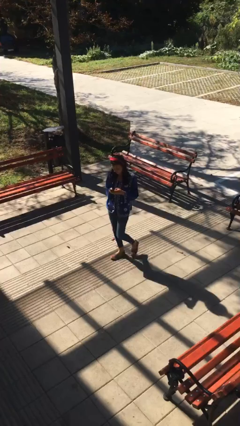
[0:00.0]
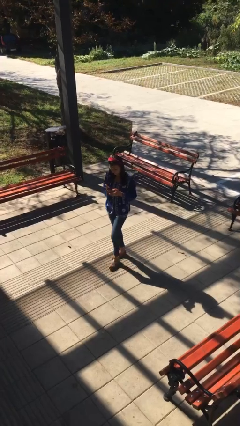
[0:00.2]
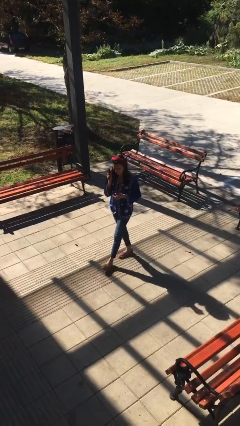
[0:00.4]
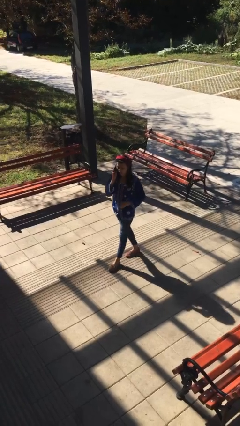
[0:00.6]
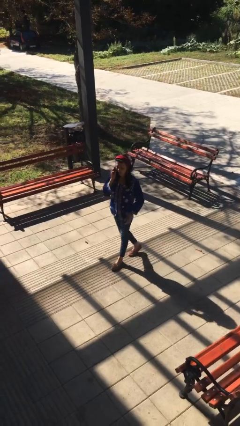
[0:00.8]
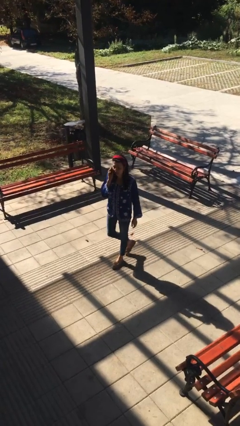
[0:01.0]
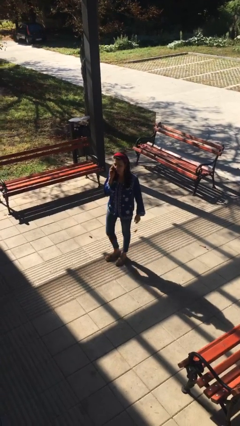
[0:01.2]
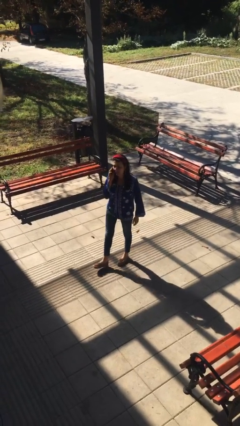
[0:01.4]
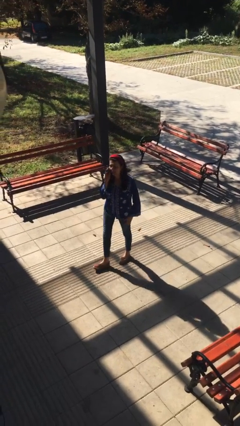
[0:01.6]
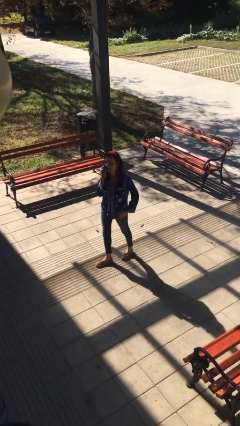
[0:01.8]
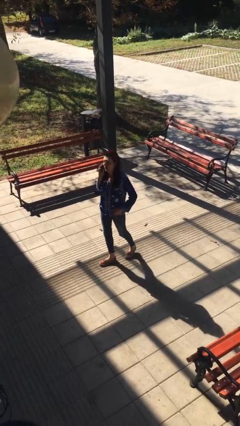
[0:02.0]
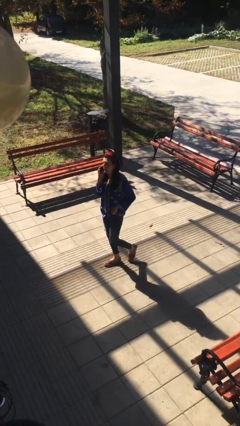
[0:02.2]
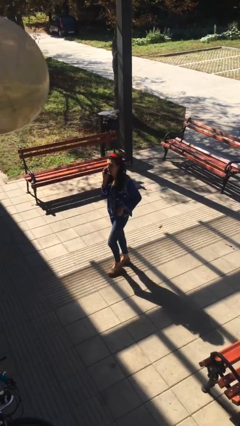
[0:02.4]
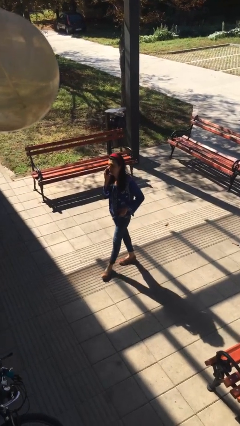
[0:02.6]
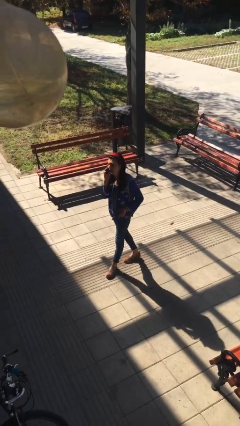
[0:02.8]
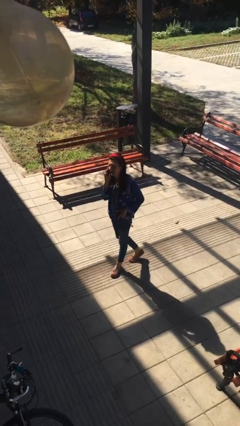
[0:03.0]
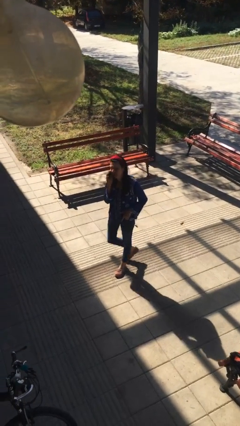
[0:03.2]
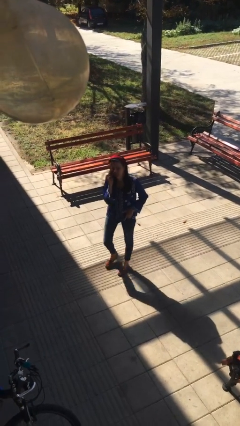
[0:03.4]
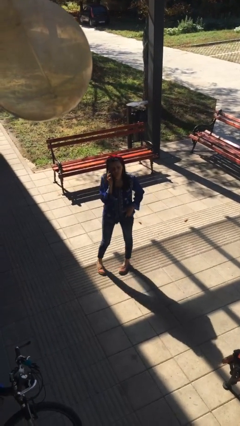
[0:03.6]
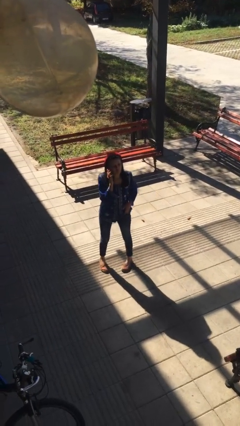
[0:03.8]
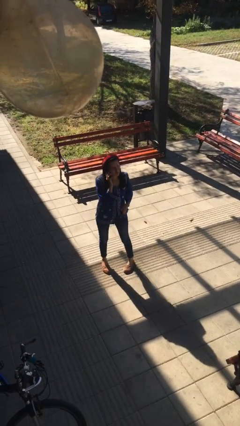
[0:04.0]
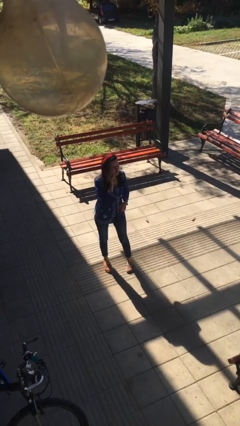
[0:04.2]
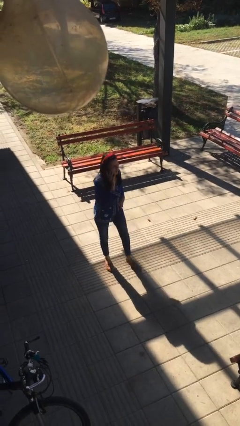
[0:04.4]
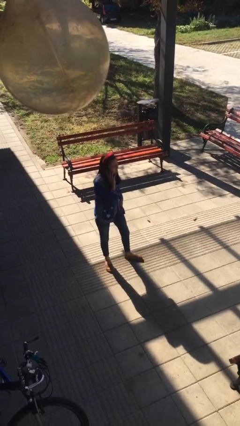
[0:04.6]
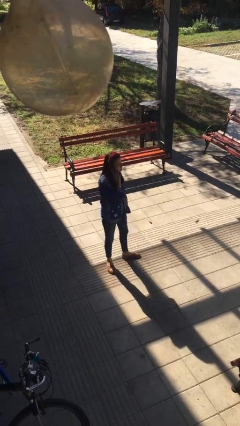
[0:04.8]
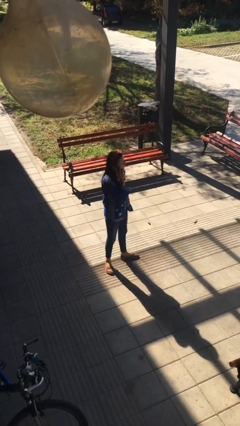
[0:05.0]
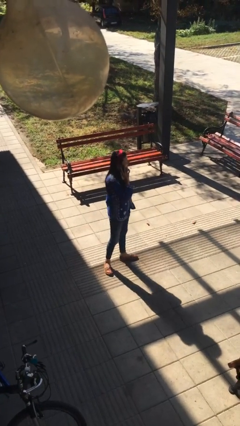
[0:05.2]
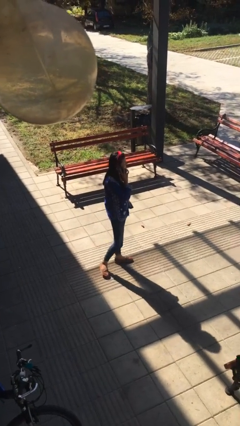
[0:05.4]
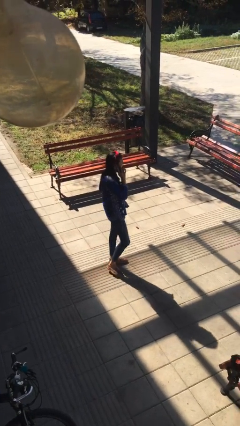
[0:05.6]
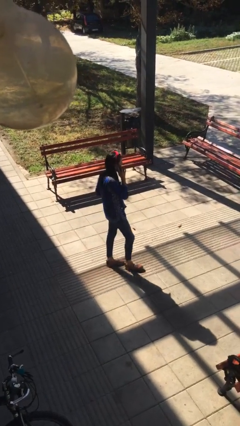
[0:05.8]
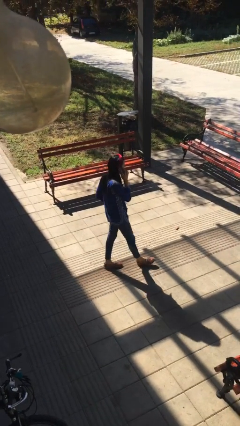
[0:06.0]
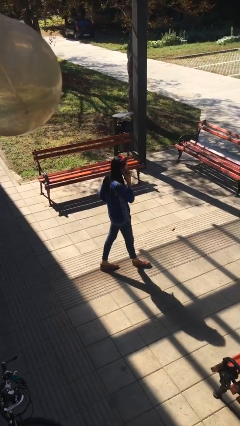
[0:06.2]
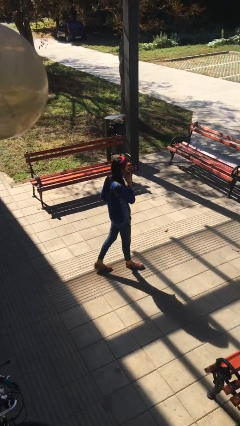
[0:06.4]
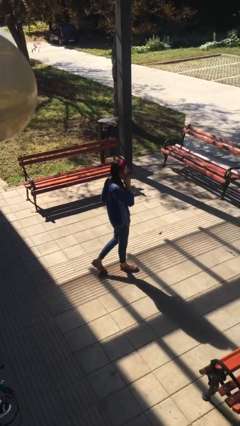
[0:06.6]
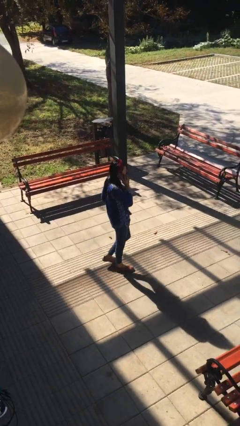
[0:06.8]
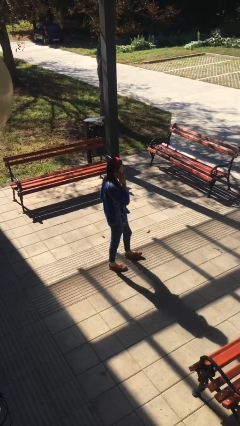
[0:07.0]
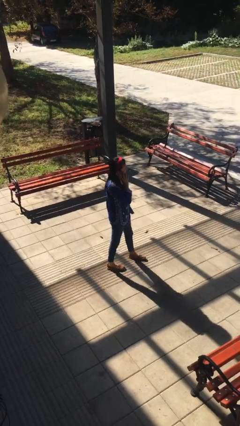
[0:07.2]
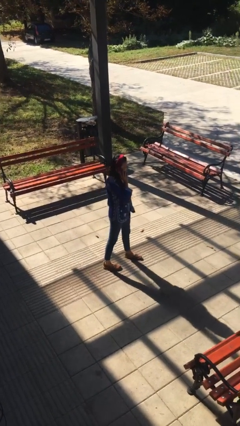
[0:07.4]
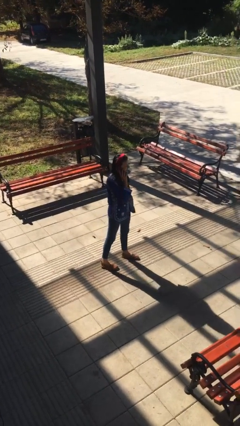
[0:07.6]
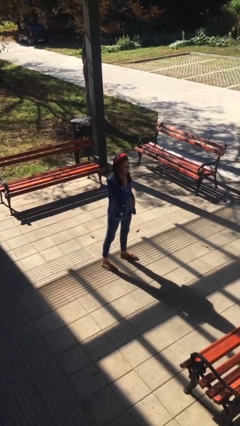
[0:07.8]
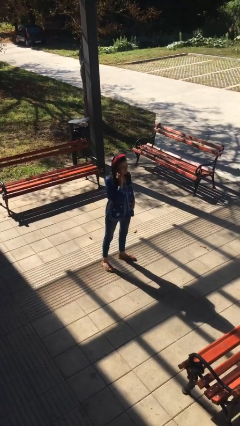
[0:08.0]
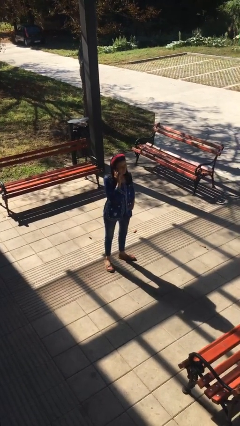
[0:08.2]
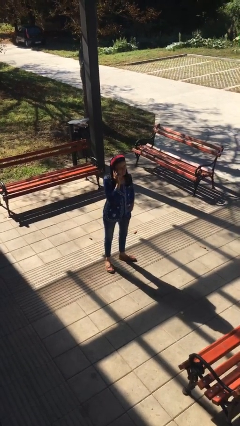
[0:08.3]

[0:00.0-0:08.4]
person talks on phone

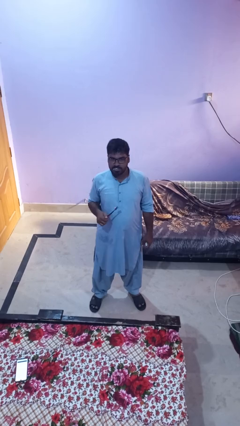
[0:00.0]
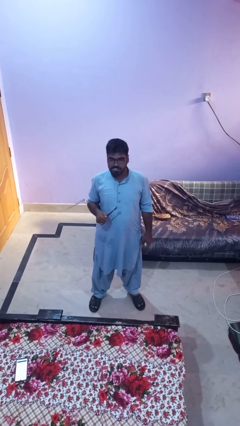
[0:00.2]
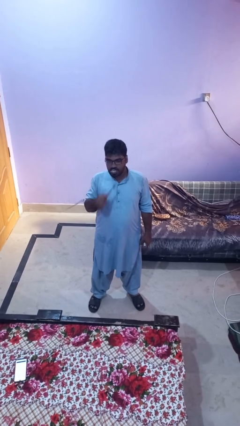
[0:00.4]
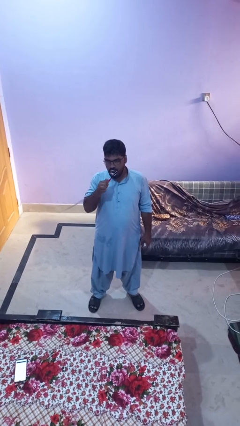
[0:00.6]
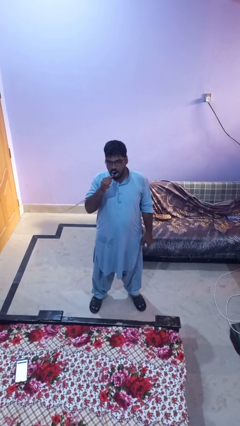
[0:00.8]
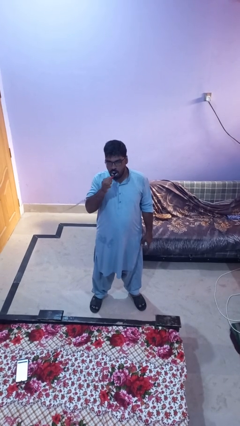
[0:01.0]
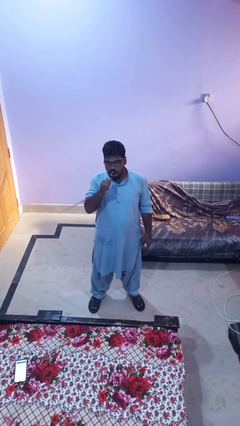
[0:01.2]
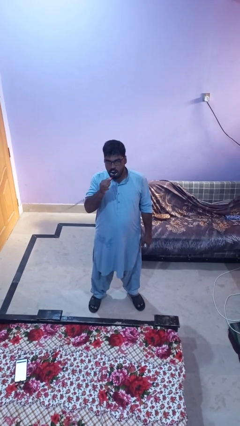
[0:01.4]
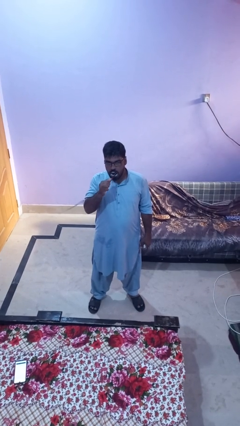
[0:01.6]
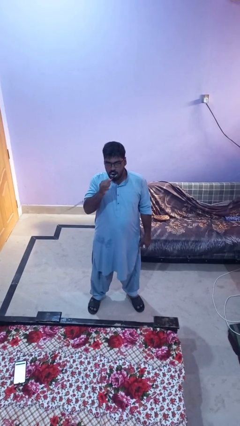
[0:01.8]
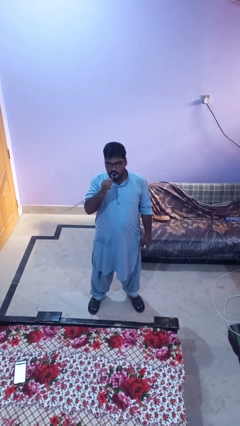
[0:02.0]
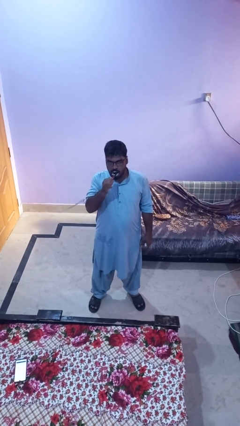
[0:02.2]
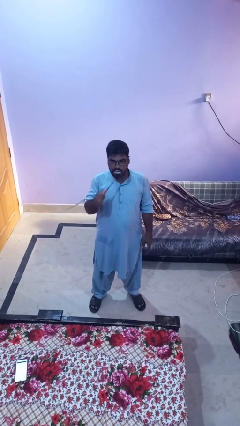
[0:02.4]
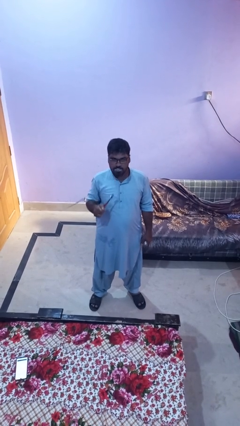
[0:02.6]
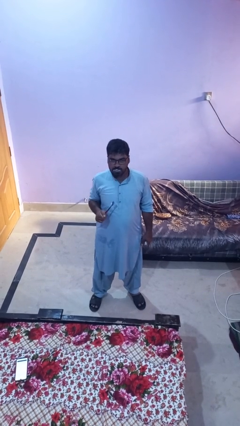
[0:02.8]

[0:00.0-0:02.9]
person brushes teeth

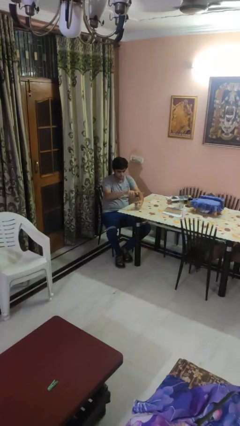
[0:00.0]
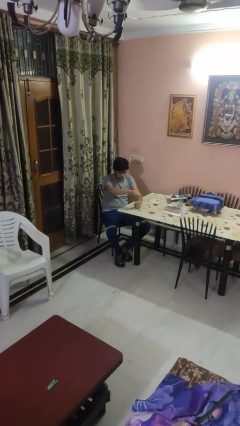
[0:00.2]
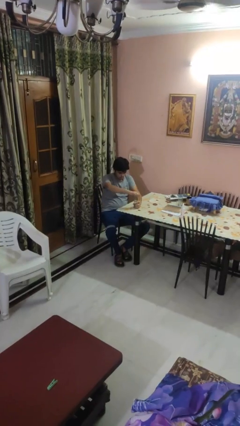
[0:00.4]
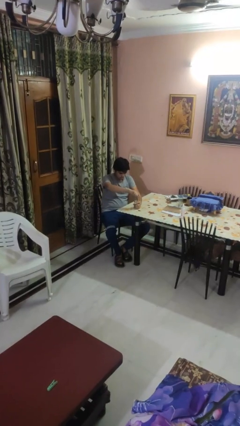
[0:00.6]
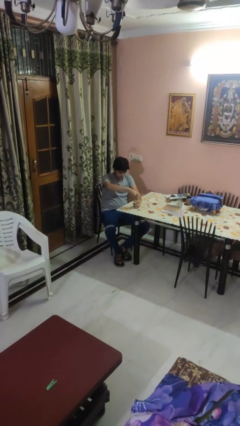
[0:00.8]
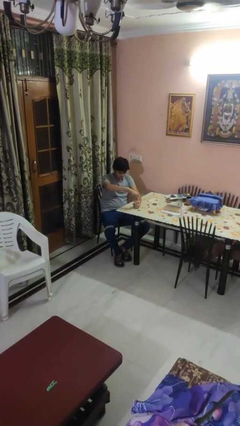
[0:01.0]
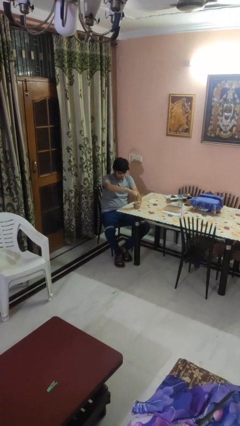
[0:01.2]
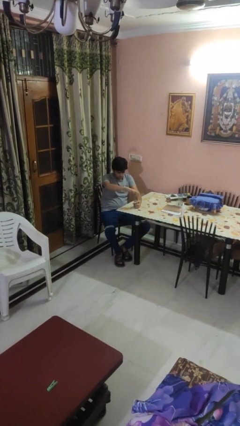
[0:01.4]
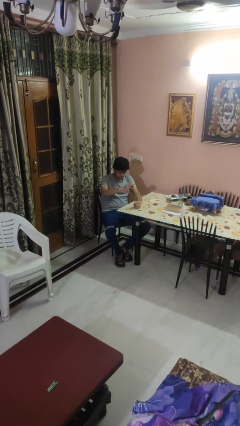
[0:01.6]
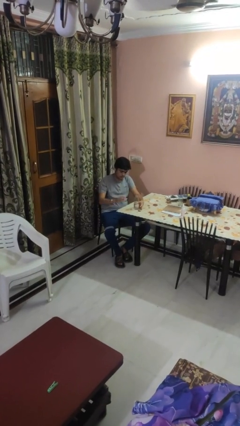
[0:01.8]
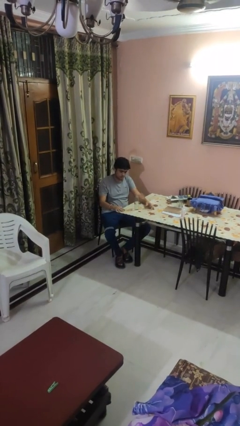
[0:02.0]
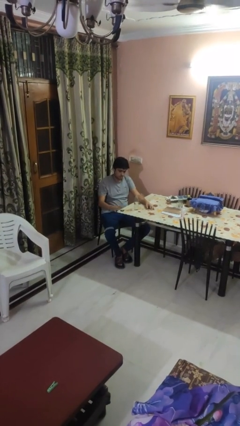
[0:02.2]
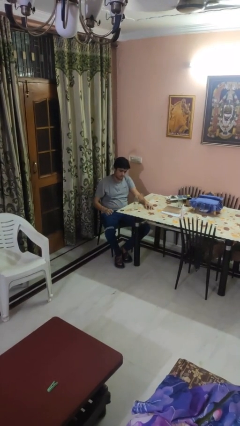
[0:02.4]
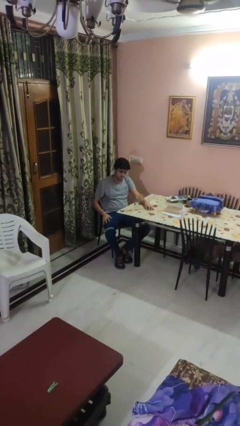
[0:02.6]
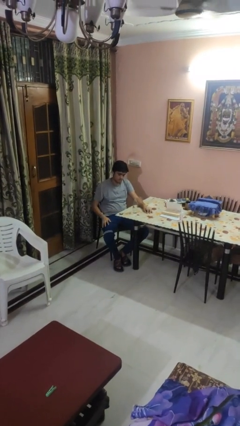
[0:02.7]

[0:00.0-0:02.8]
person unscrews lid from bottle

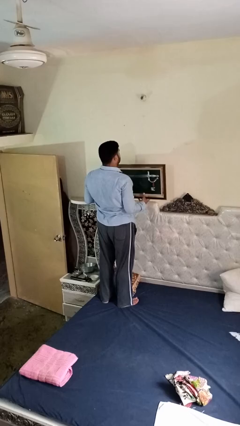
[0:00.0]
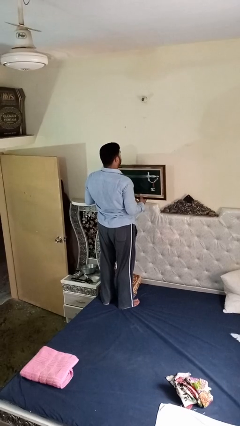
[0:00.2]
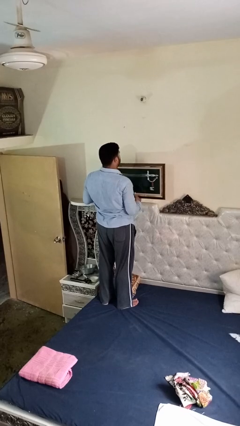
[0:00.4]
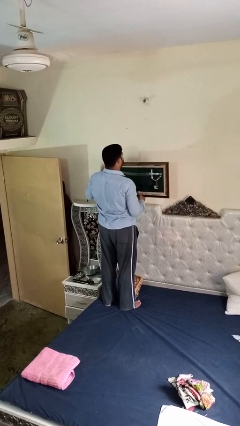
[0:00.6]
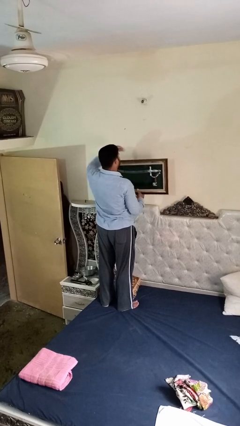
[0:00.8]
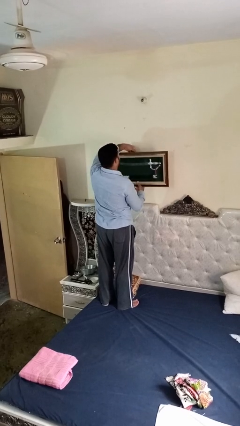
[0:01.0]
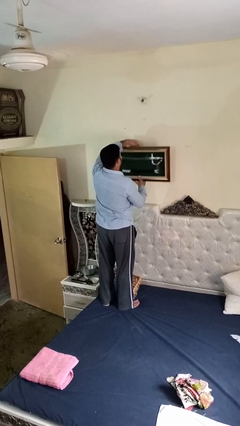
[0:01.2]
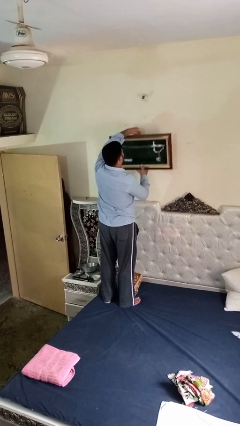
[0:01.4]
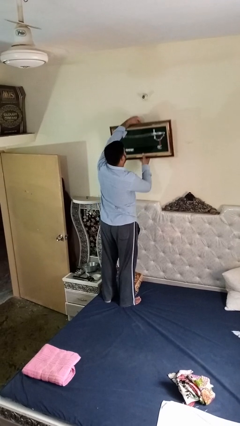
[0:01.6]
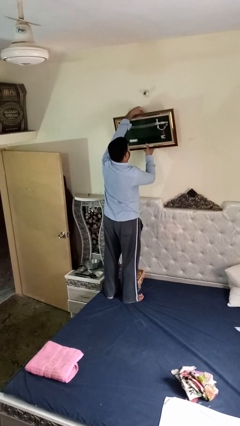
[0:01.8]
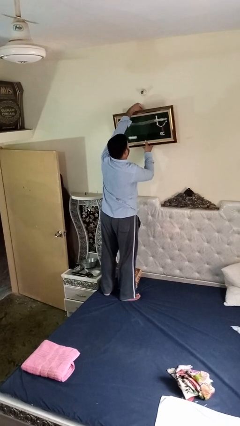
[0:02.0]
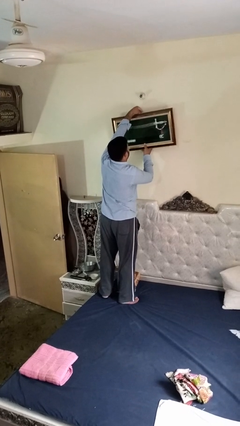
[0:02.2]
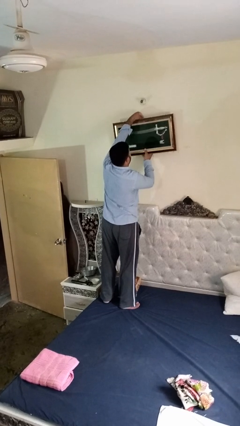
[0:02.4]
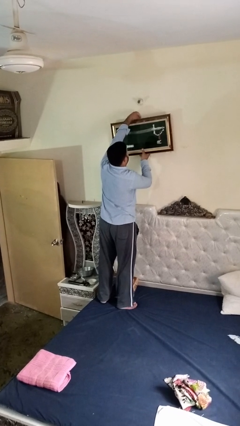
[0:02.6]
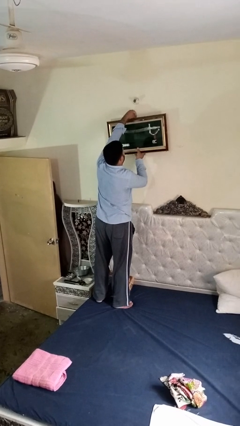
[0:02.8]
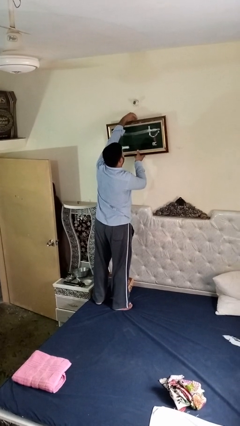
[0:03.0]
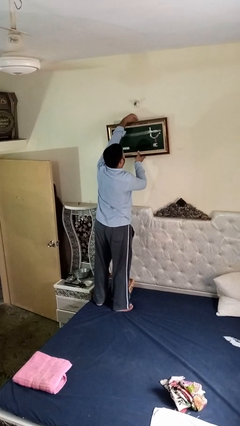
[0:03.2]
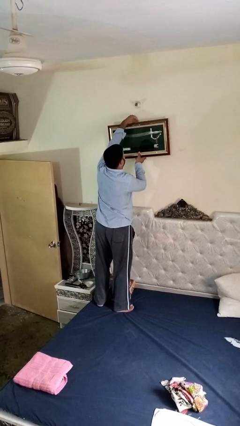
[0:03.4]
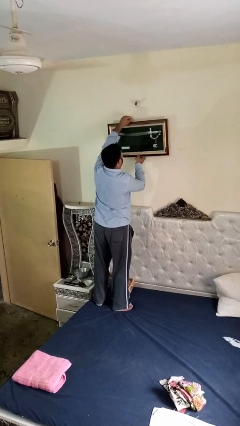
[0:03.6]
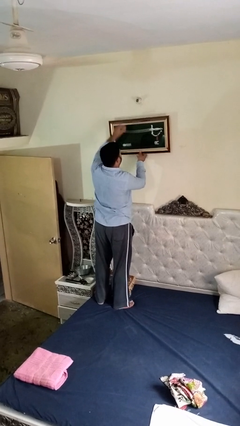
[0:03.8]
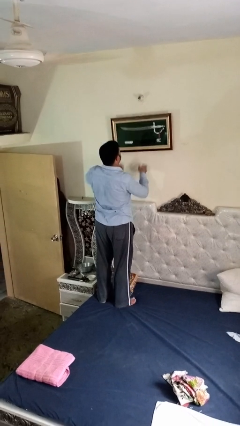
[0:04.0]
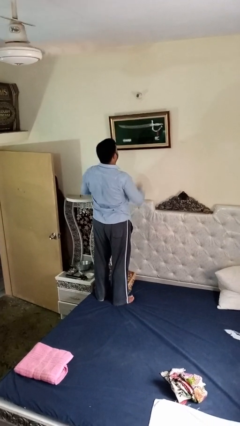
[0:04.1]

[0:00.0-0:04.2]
person puts up picture frame
